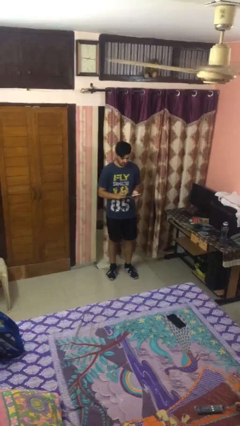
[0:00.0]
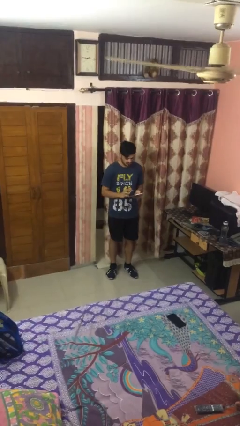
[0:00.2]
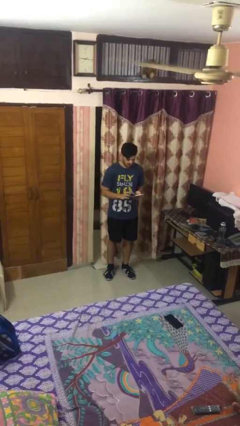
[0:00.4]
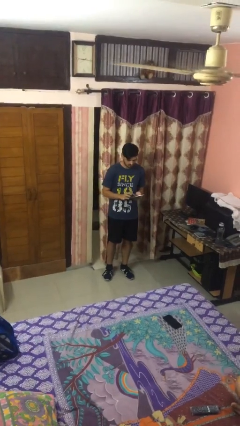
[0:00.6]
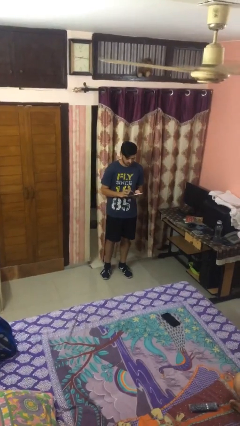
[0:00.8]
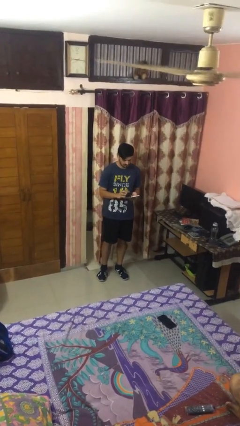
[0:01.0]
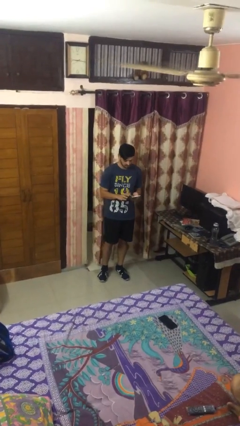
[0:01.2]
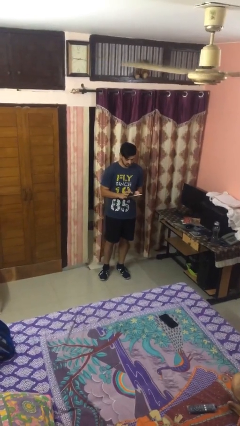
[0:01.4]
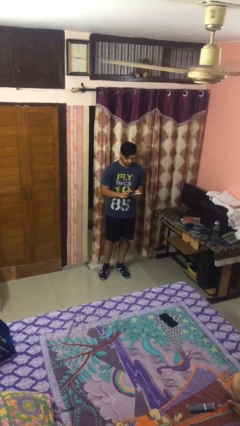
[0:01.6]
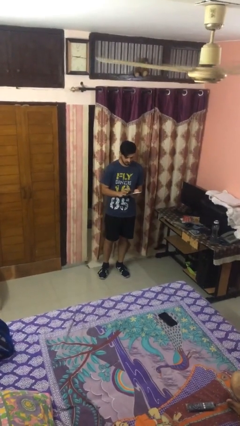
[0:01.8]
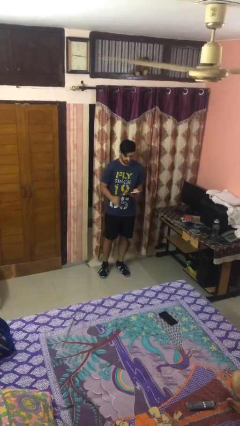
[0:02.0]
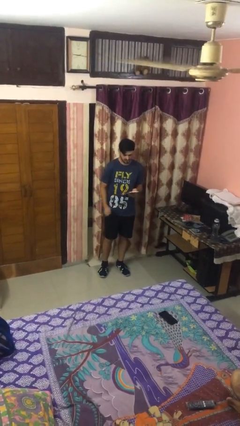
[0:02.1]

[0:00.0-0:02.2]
person interacts with tablet

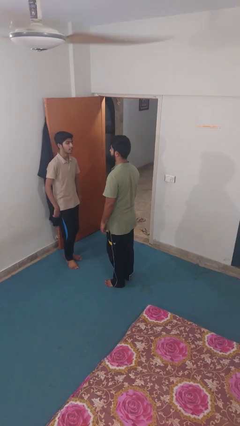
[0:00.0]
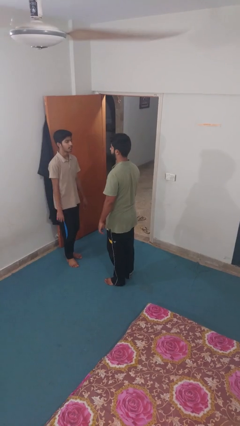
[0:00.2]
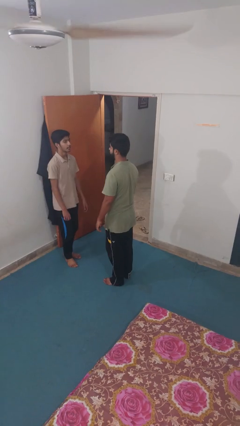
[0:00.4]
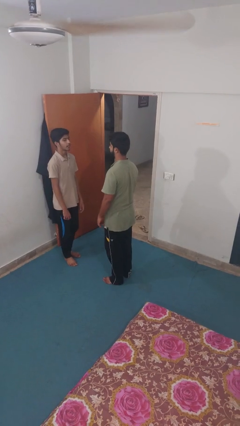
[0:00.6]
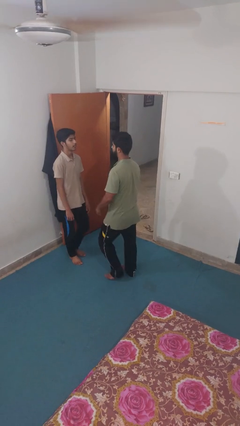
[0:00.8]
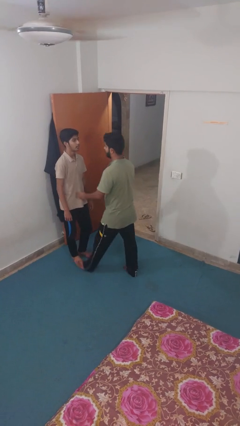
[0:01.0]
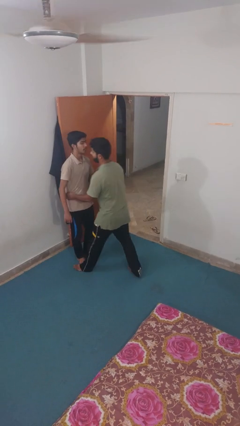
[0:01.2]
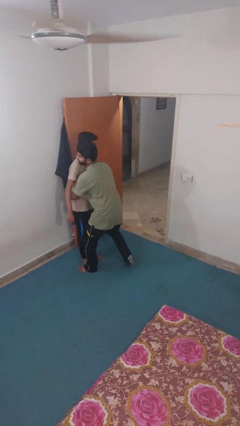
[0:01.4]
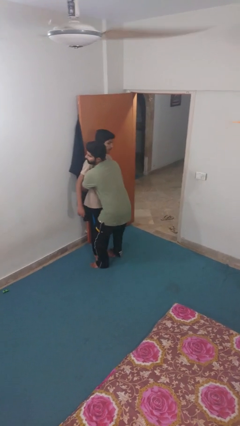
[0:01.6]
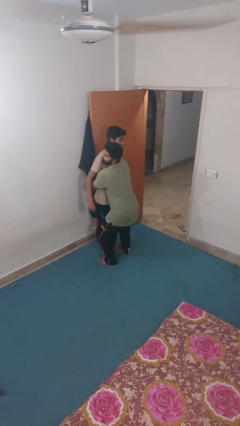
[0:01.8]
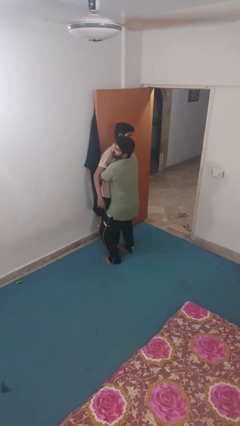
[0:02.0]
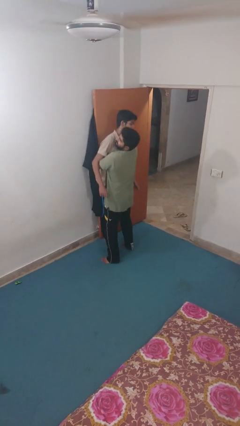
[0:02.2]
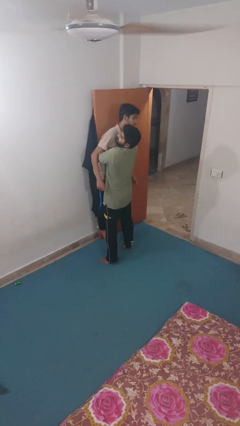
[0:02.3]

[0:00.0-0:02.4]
person picks up person

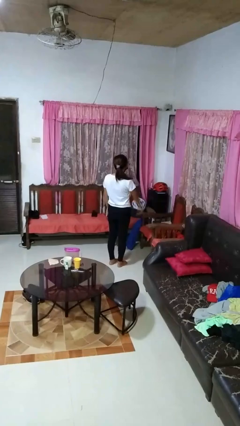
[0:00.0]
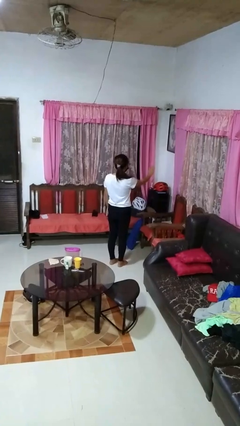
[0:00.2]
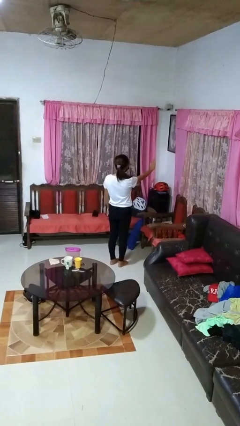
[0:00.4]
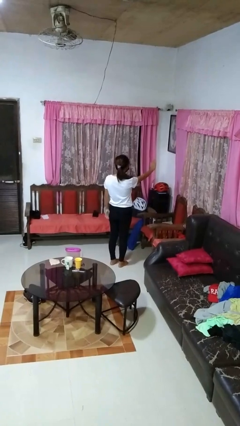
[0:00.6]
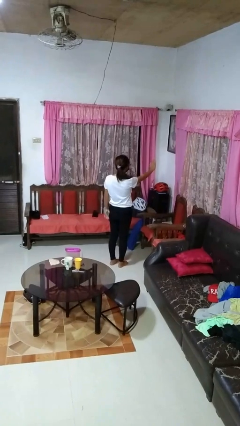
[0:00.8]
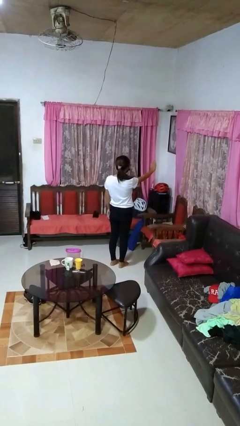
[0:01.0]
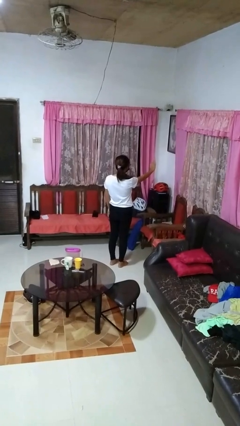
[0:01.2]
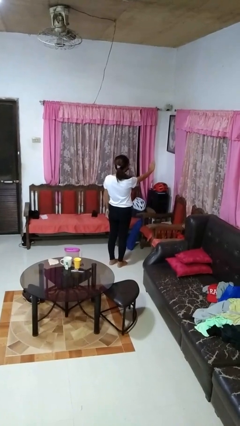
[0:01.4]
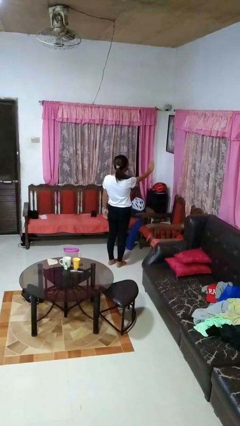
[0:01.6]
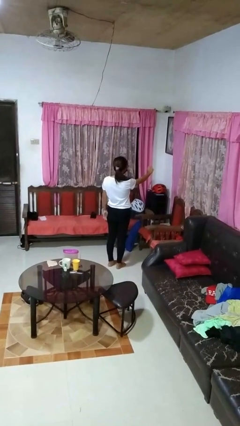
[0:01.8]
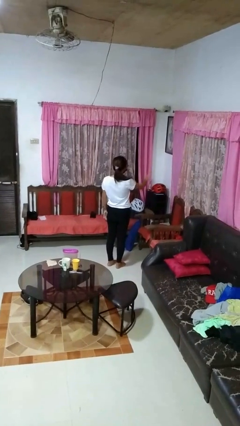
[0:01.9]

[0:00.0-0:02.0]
person gestures stop

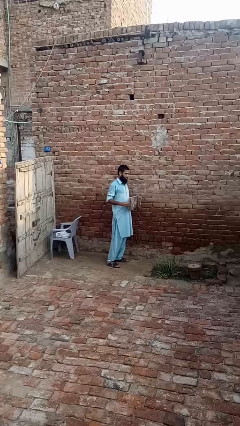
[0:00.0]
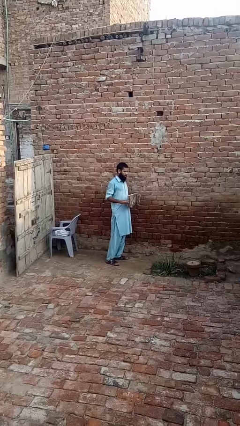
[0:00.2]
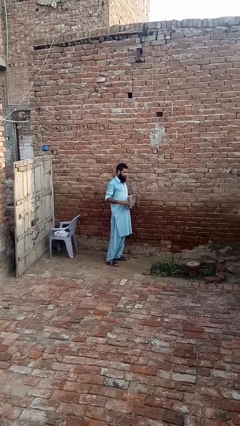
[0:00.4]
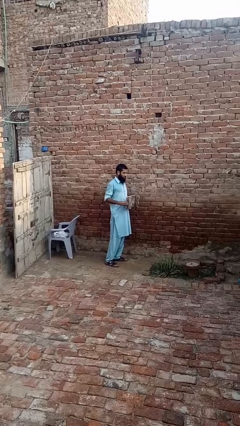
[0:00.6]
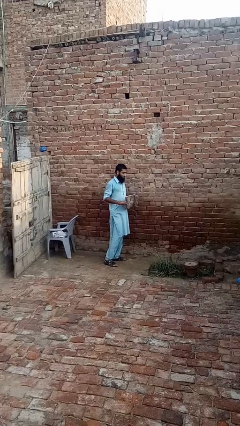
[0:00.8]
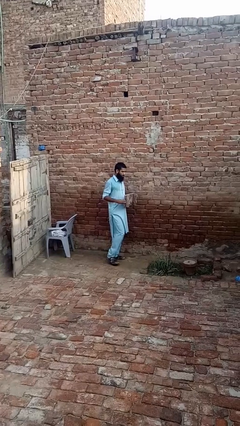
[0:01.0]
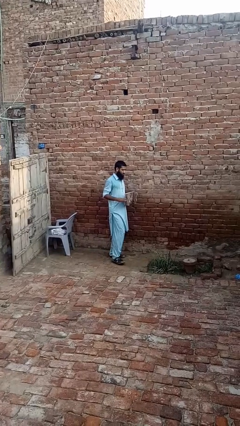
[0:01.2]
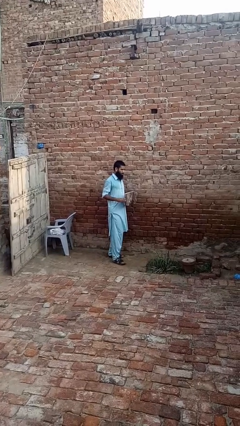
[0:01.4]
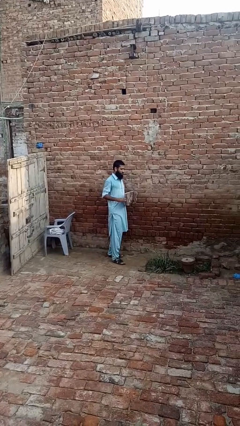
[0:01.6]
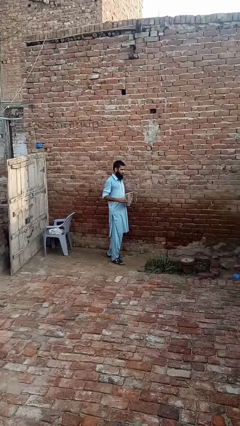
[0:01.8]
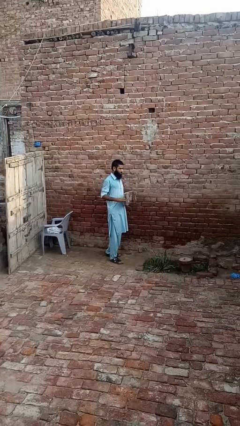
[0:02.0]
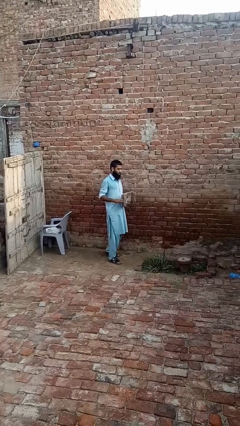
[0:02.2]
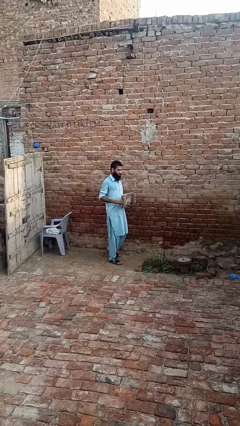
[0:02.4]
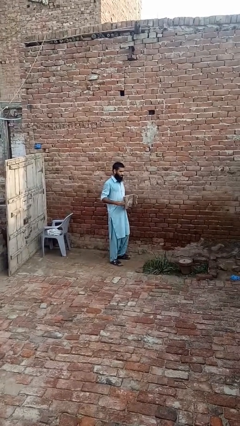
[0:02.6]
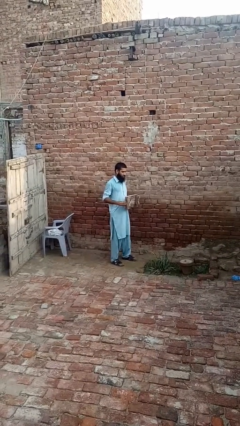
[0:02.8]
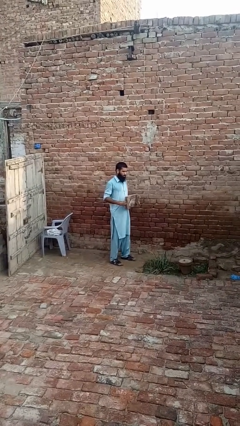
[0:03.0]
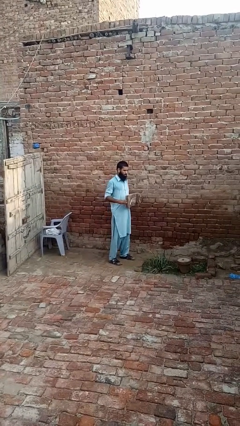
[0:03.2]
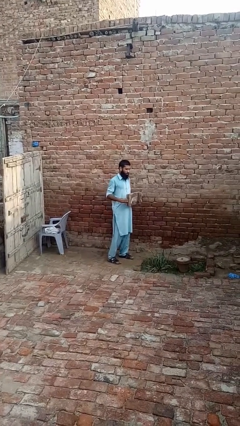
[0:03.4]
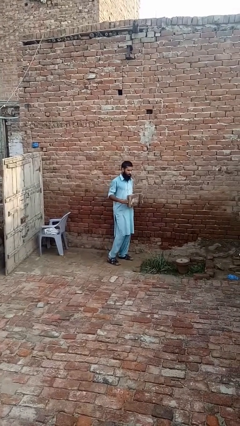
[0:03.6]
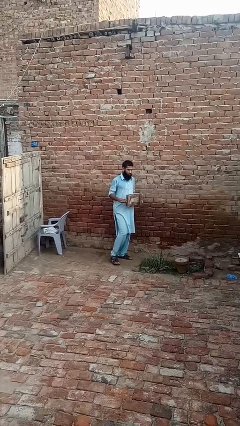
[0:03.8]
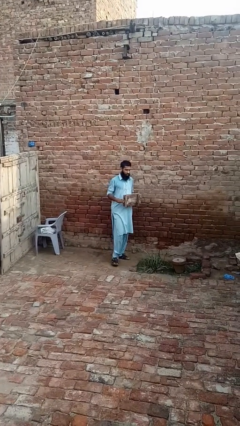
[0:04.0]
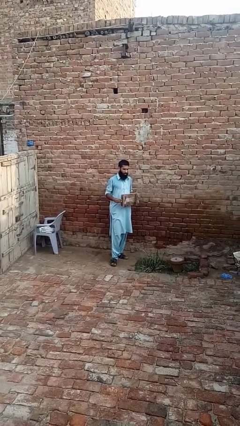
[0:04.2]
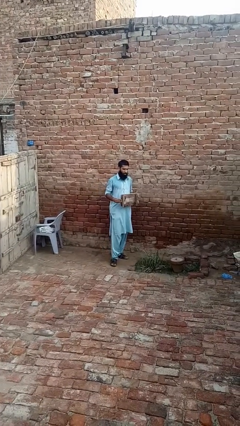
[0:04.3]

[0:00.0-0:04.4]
person carries furniture

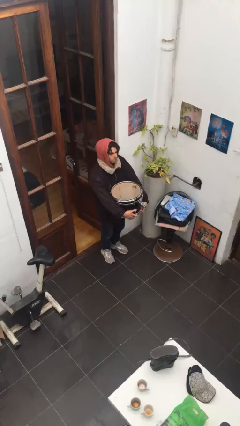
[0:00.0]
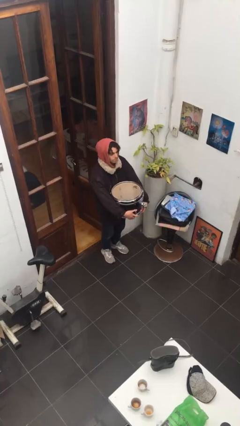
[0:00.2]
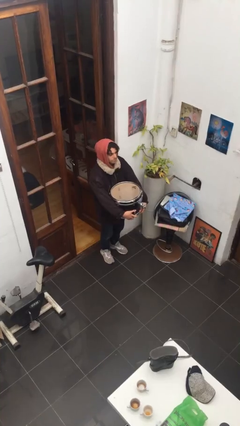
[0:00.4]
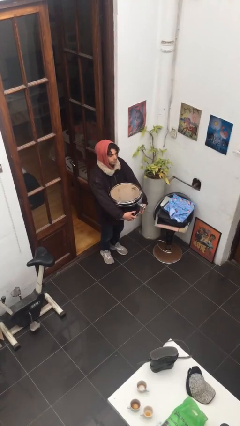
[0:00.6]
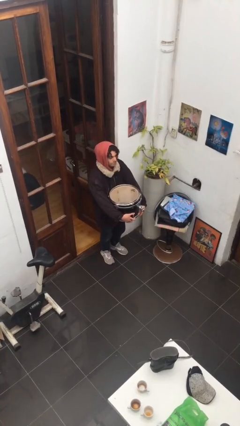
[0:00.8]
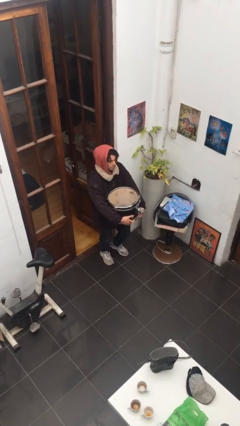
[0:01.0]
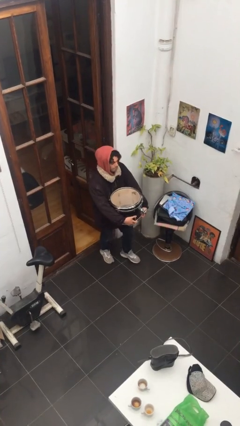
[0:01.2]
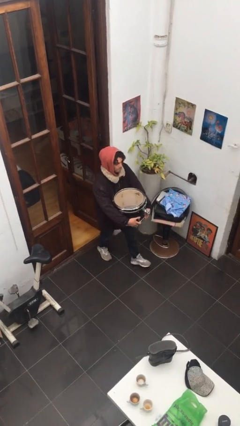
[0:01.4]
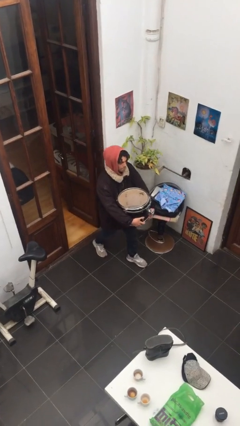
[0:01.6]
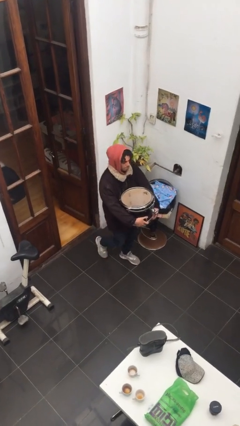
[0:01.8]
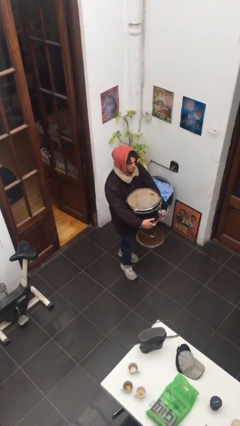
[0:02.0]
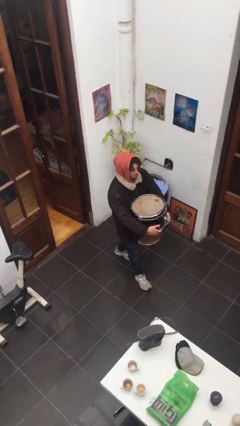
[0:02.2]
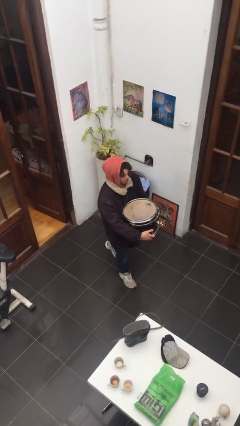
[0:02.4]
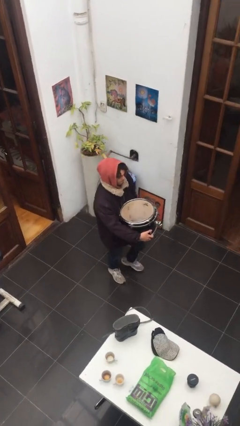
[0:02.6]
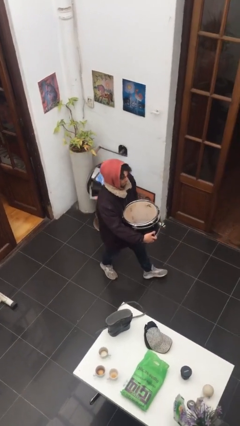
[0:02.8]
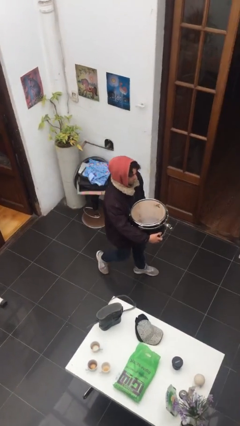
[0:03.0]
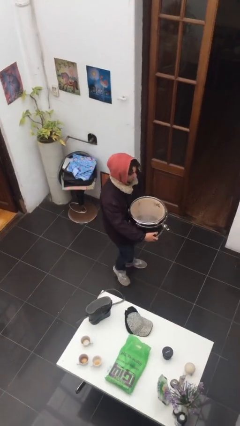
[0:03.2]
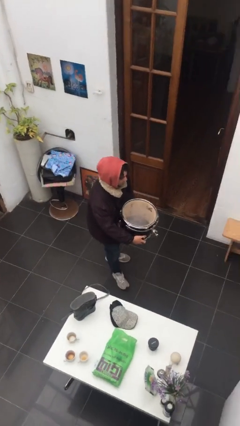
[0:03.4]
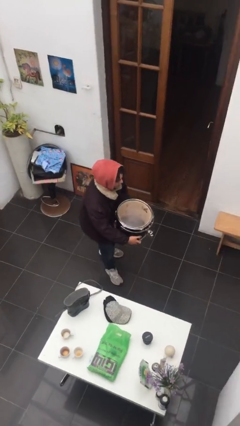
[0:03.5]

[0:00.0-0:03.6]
person carries heavy object

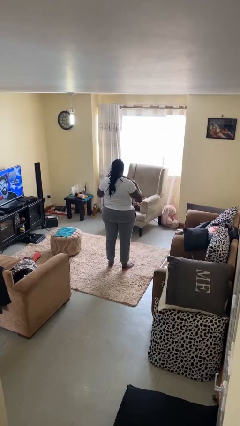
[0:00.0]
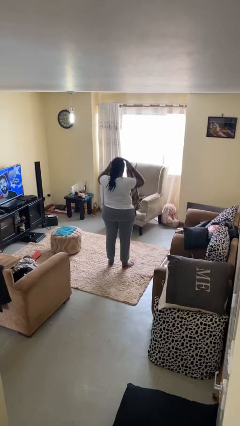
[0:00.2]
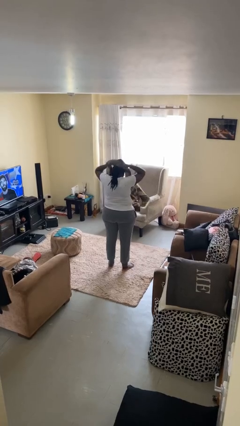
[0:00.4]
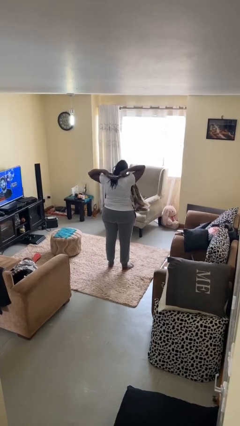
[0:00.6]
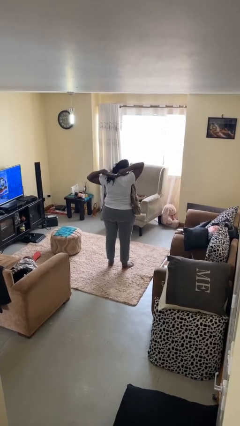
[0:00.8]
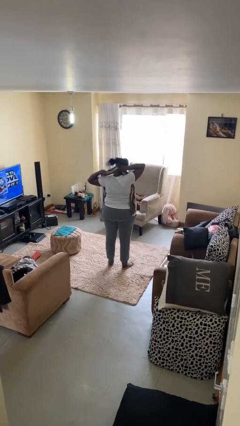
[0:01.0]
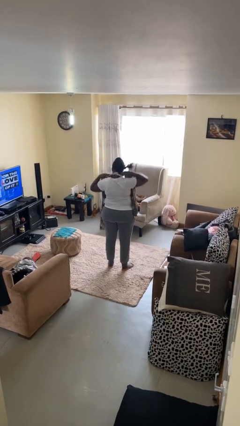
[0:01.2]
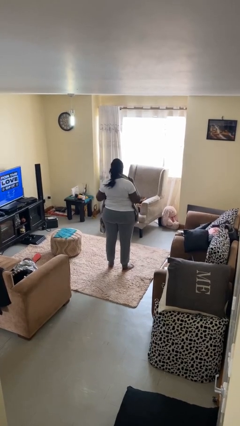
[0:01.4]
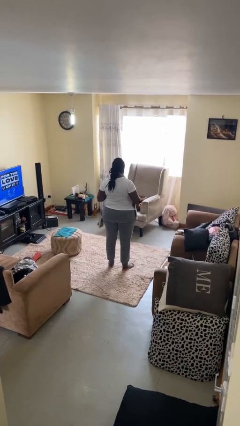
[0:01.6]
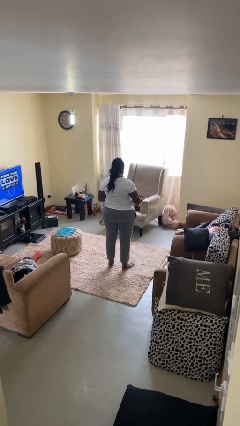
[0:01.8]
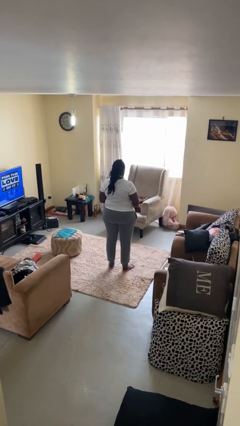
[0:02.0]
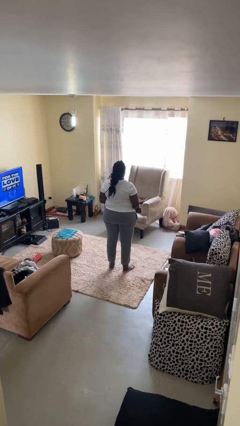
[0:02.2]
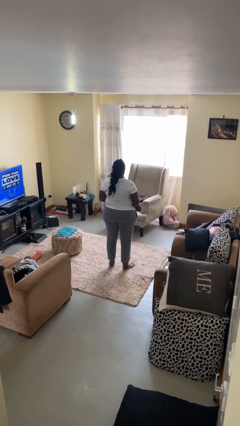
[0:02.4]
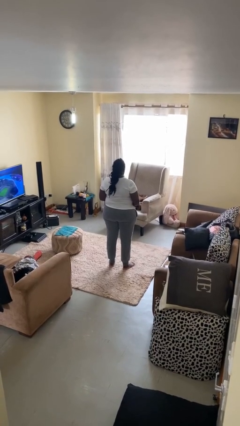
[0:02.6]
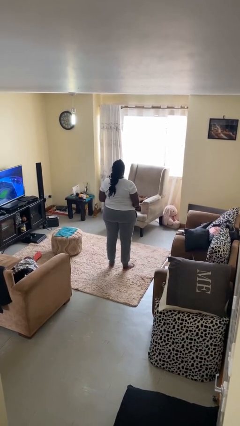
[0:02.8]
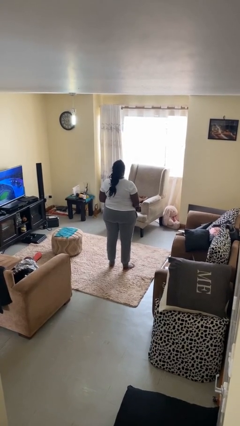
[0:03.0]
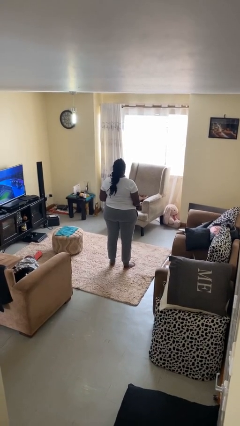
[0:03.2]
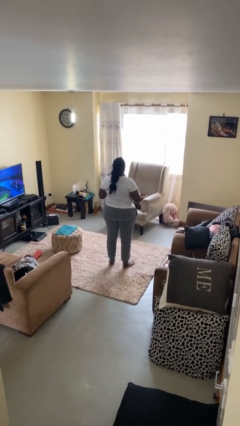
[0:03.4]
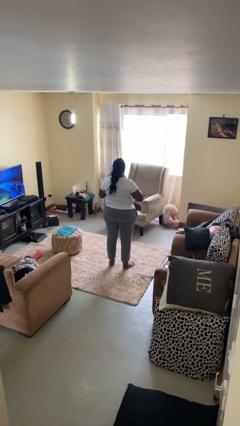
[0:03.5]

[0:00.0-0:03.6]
person puts on scarf
